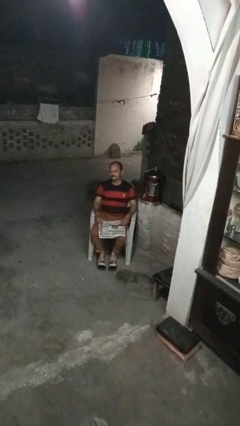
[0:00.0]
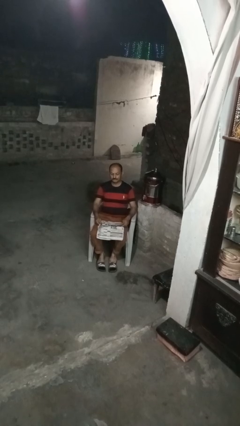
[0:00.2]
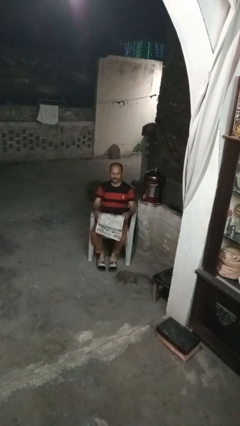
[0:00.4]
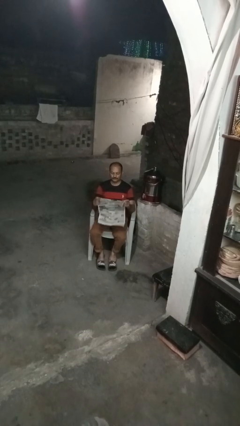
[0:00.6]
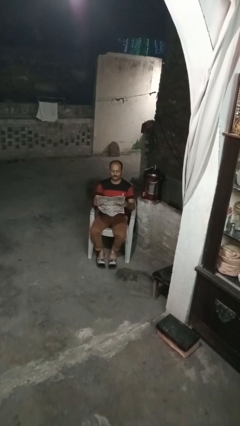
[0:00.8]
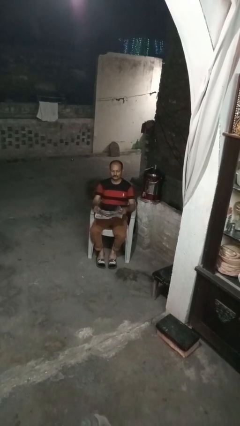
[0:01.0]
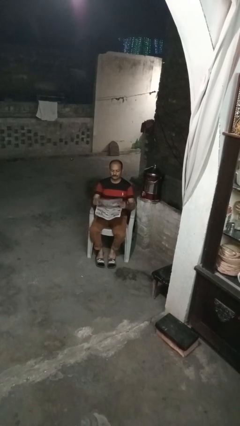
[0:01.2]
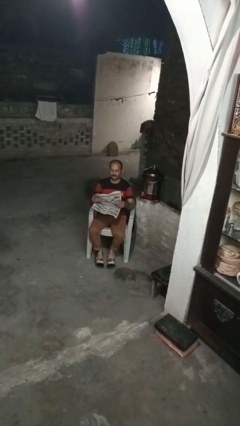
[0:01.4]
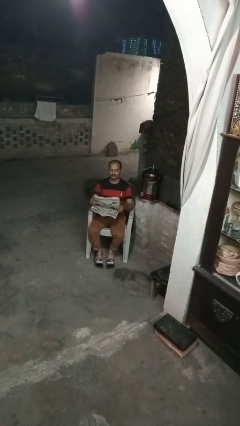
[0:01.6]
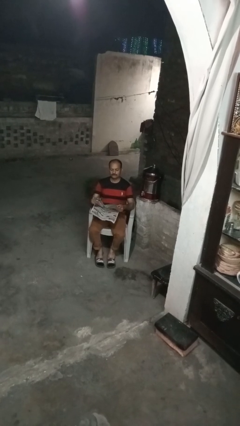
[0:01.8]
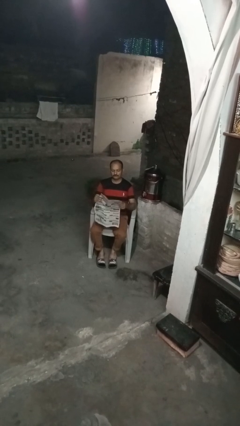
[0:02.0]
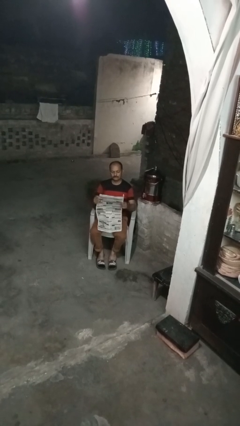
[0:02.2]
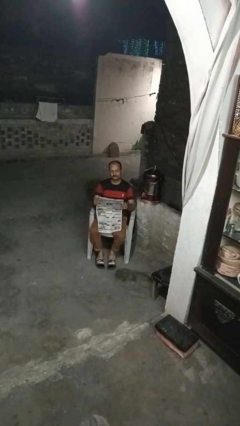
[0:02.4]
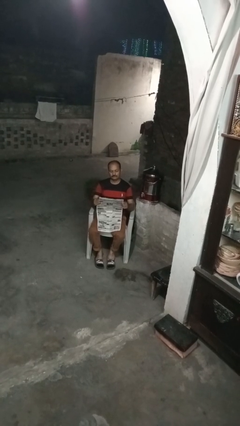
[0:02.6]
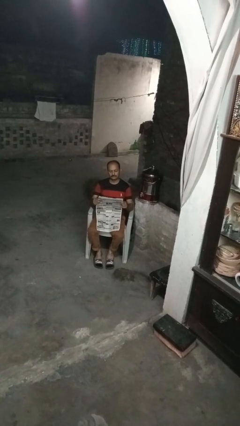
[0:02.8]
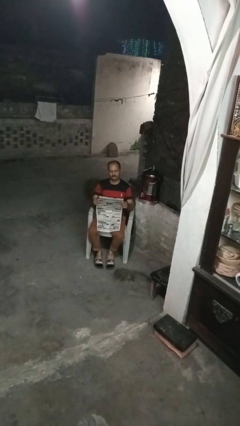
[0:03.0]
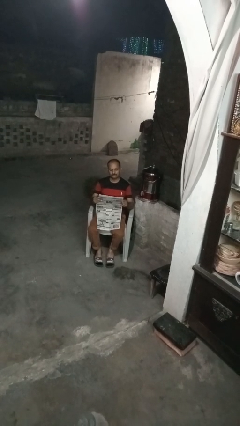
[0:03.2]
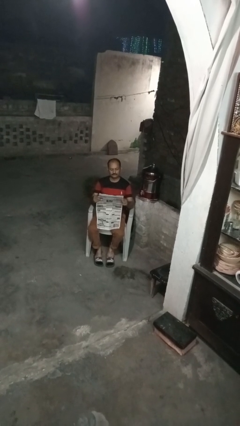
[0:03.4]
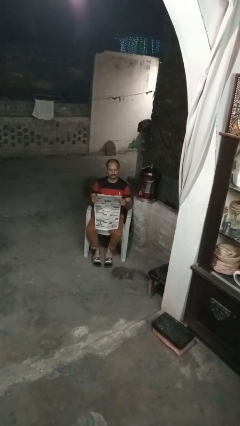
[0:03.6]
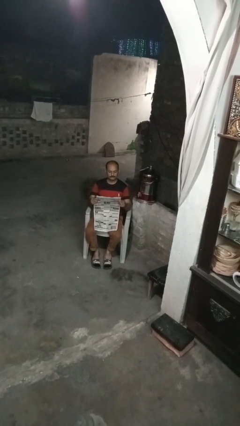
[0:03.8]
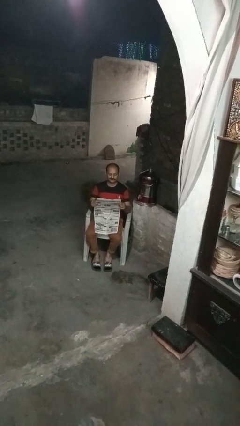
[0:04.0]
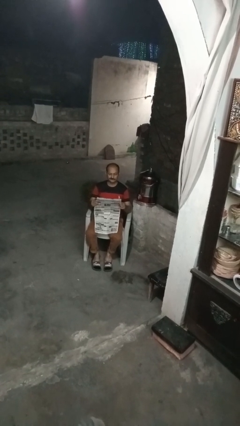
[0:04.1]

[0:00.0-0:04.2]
person reads newspaper

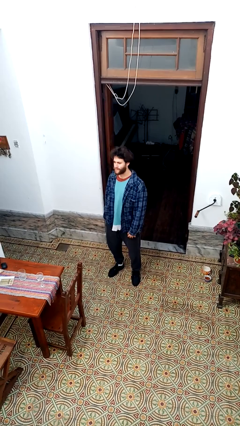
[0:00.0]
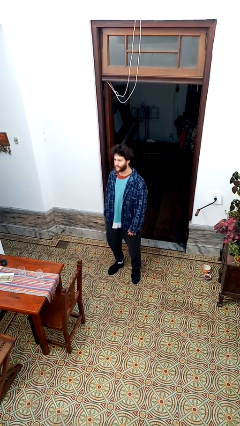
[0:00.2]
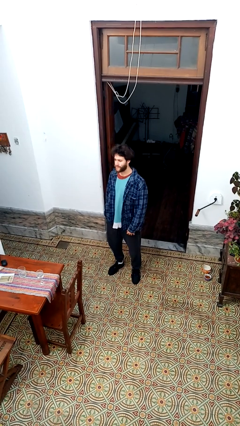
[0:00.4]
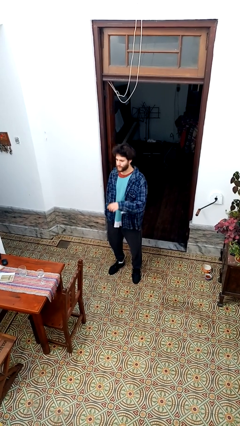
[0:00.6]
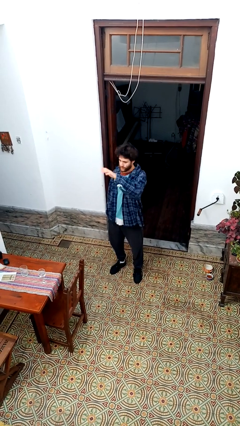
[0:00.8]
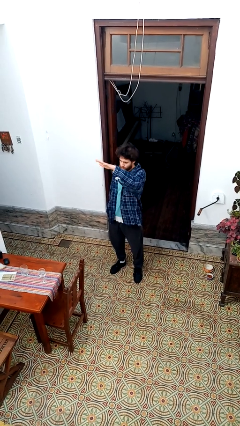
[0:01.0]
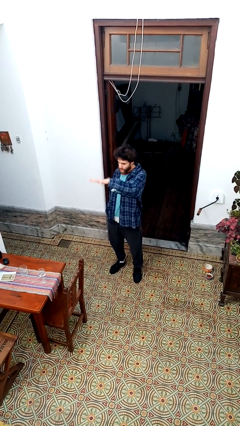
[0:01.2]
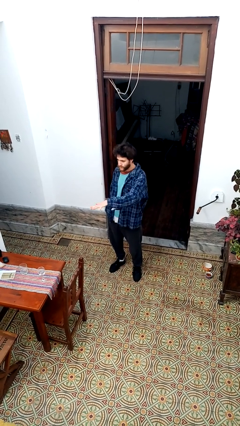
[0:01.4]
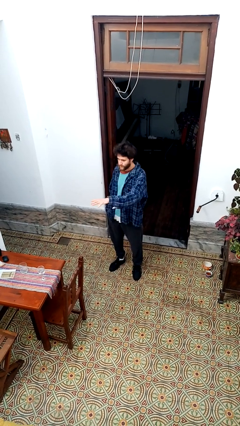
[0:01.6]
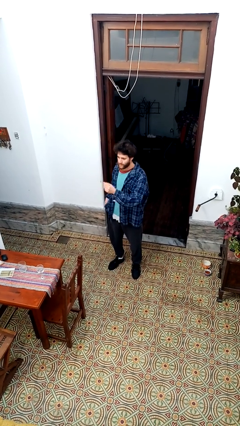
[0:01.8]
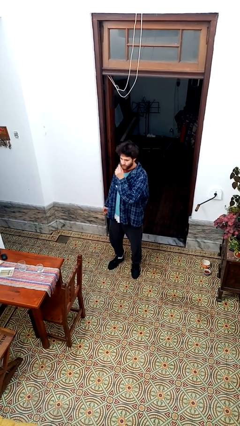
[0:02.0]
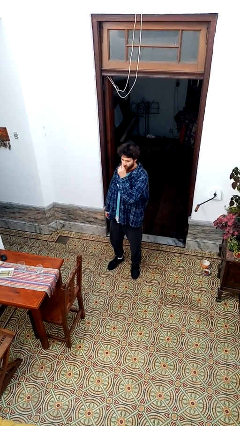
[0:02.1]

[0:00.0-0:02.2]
person gestures swipe down

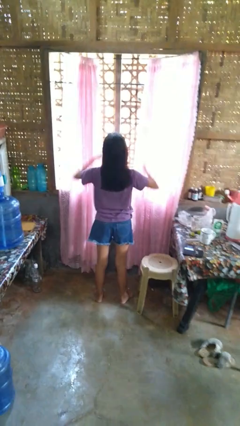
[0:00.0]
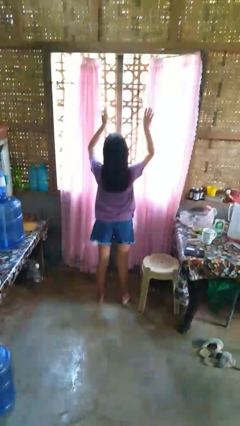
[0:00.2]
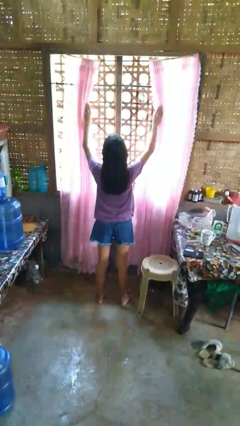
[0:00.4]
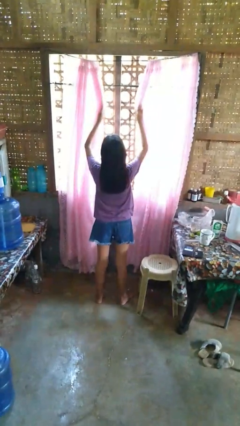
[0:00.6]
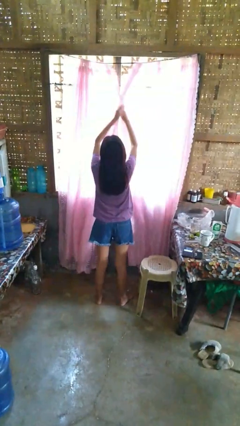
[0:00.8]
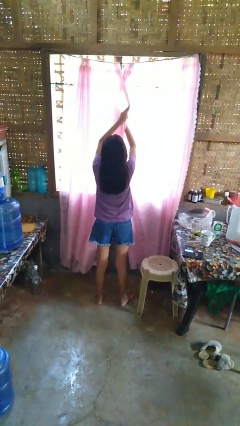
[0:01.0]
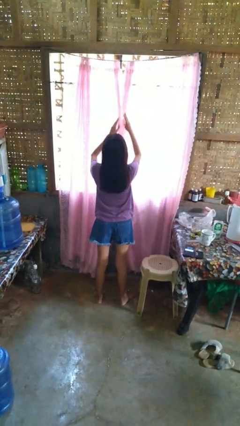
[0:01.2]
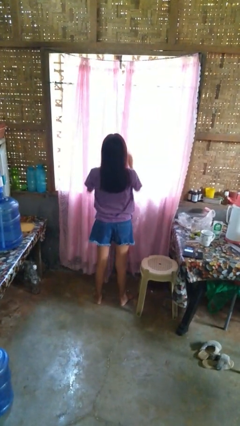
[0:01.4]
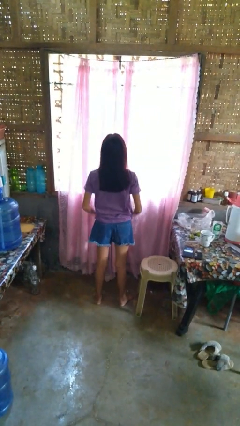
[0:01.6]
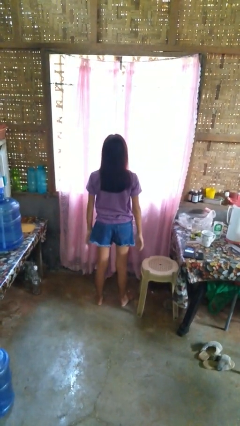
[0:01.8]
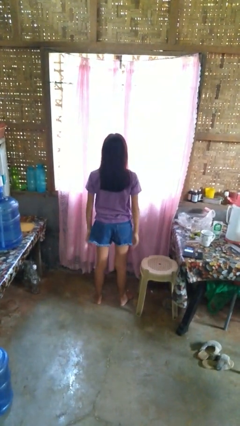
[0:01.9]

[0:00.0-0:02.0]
person closes curtains

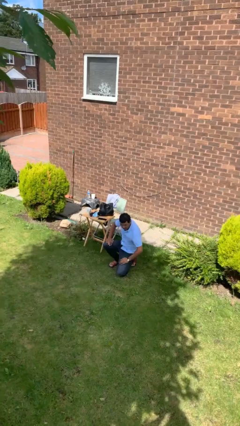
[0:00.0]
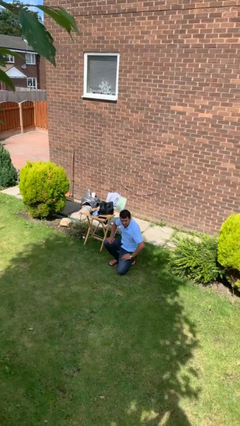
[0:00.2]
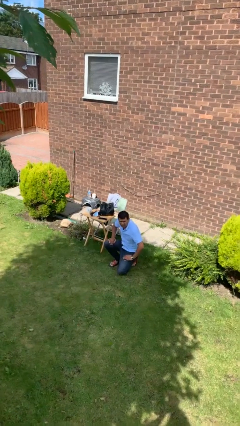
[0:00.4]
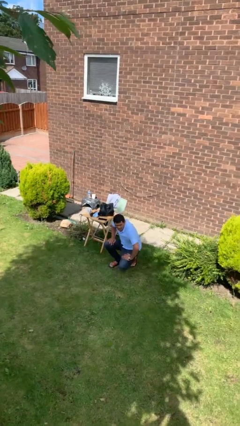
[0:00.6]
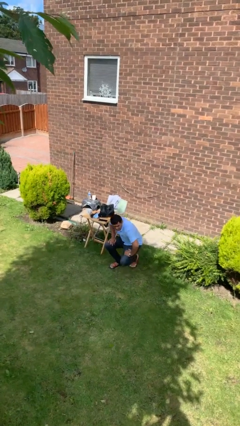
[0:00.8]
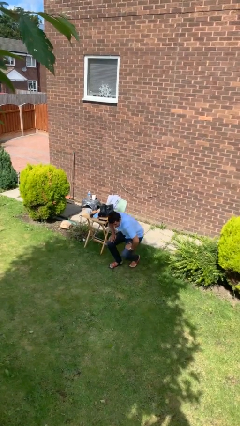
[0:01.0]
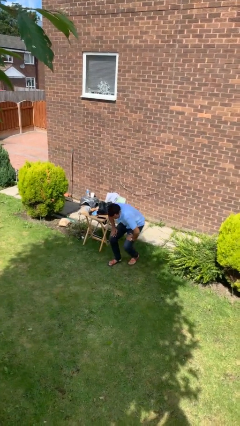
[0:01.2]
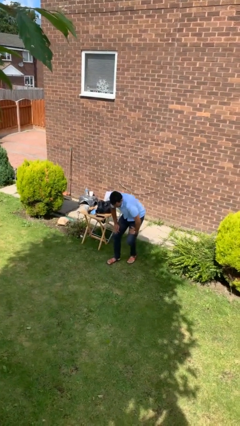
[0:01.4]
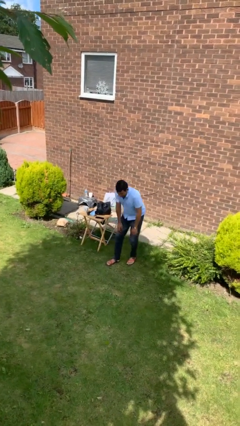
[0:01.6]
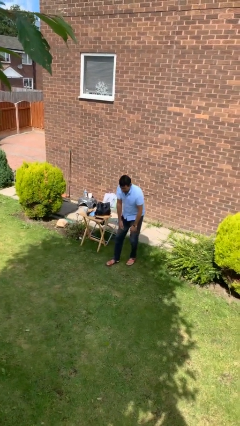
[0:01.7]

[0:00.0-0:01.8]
person stands up from floor

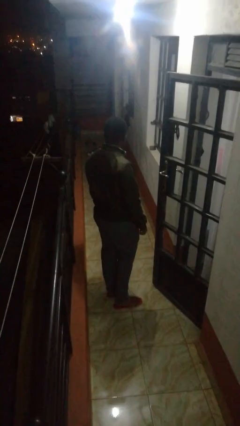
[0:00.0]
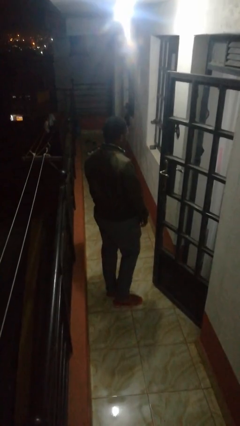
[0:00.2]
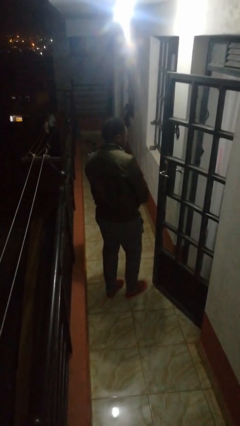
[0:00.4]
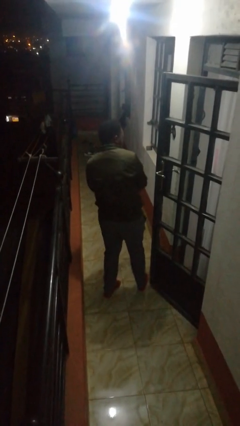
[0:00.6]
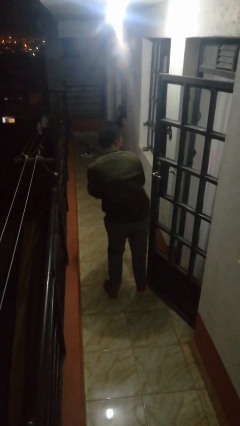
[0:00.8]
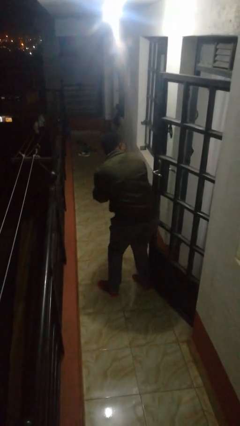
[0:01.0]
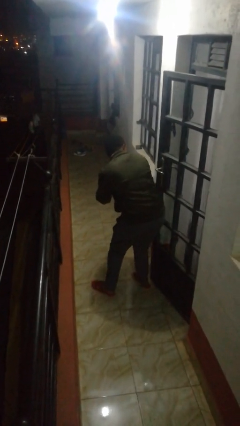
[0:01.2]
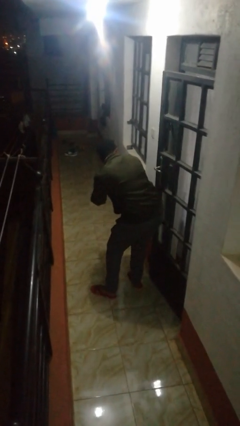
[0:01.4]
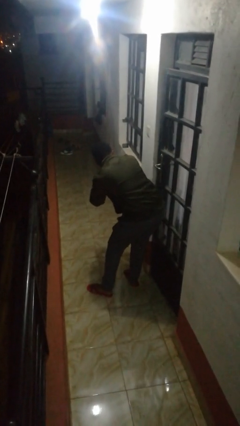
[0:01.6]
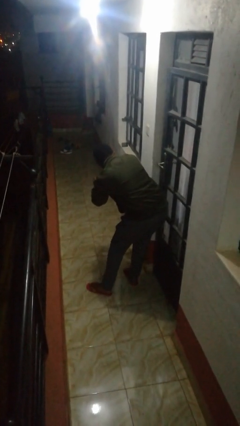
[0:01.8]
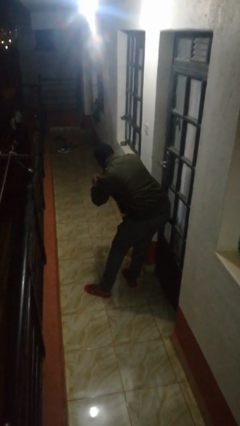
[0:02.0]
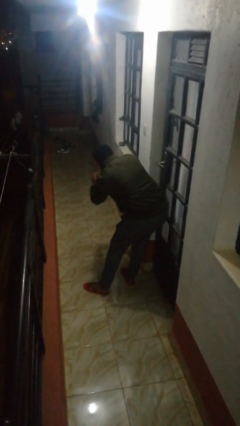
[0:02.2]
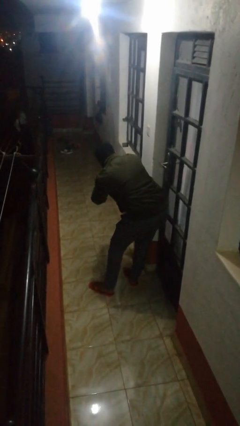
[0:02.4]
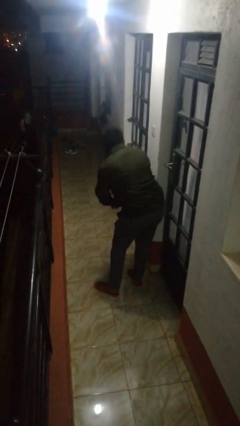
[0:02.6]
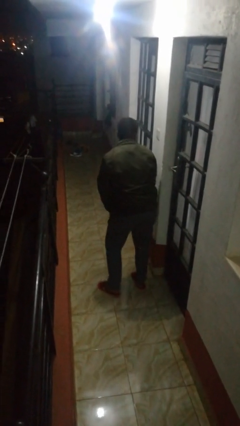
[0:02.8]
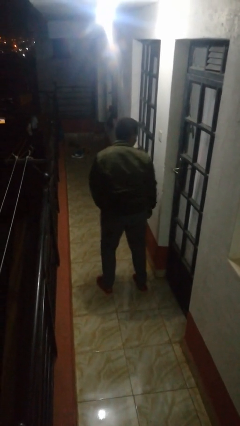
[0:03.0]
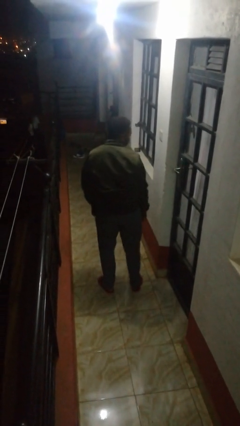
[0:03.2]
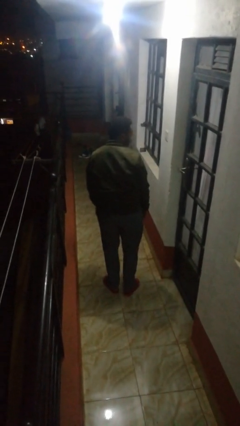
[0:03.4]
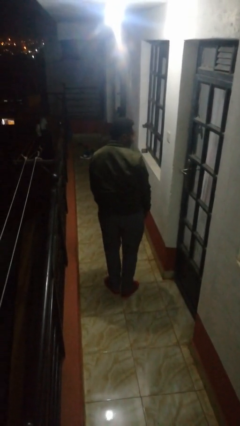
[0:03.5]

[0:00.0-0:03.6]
person closes door with hip

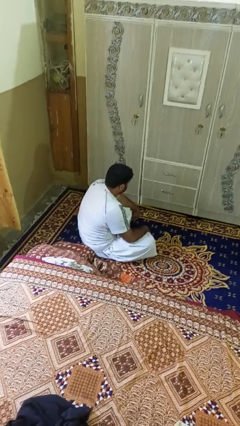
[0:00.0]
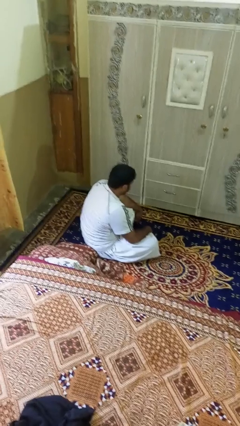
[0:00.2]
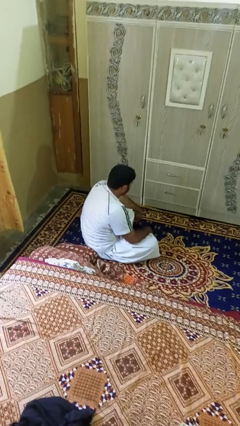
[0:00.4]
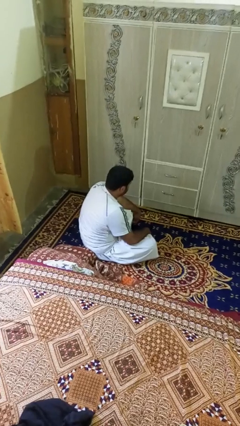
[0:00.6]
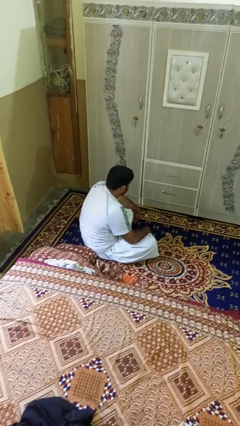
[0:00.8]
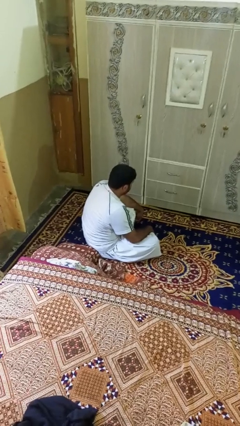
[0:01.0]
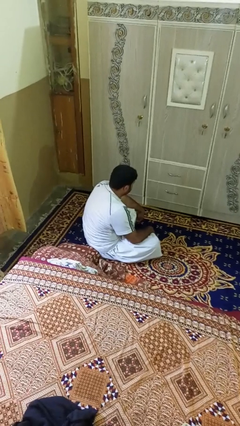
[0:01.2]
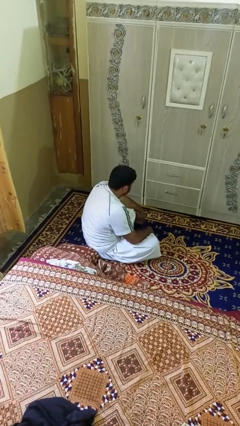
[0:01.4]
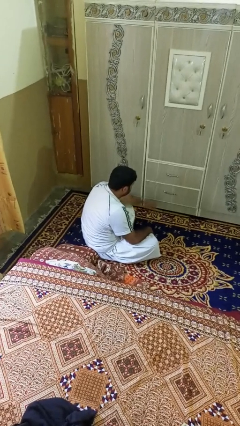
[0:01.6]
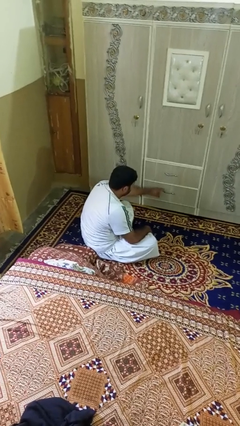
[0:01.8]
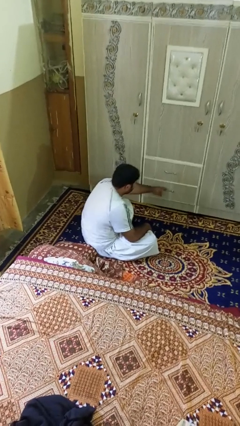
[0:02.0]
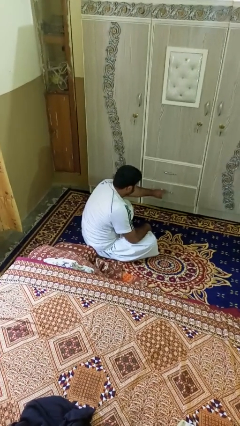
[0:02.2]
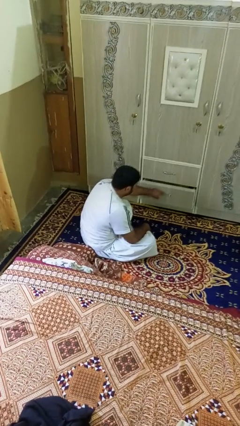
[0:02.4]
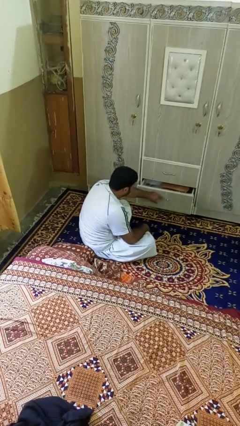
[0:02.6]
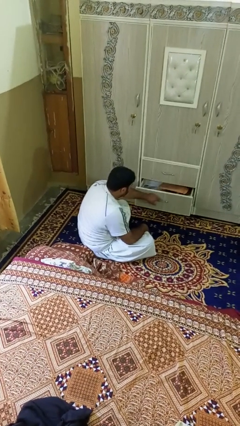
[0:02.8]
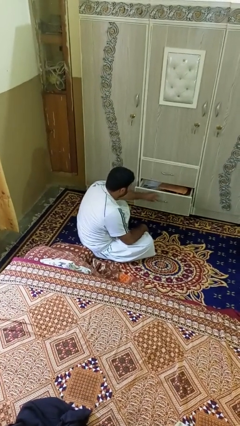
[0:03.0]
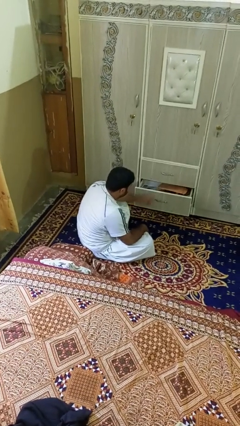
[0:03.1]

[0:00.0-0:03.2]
person opens dresser drawer

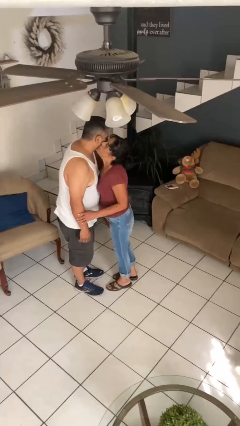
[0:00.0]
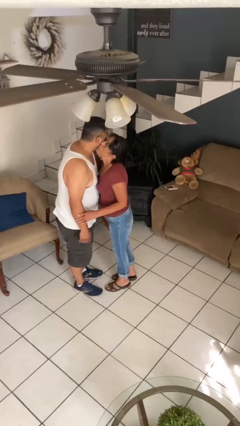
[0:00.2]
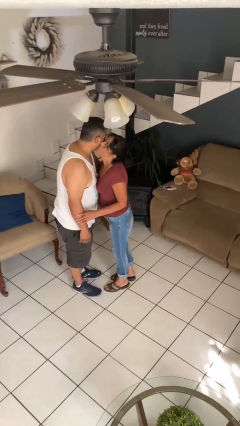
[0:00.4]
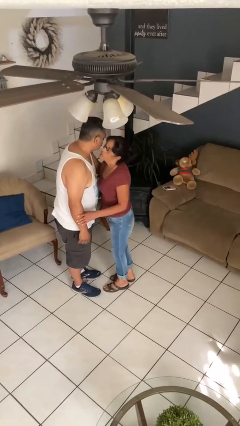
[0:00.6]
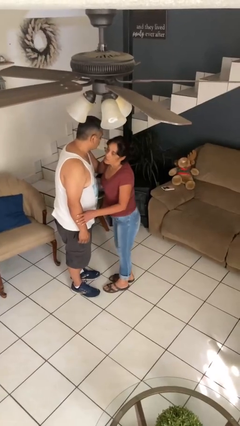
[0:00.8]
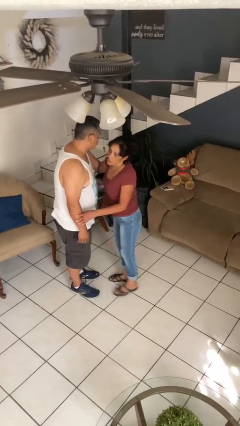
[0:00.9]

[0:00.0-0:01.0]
person kisses cheek of person
